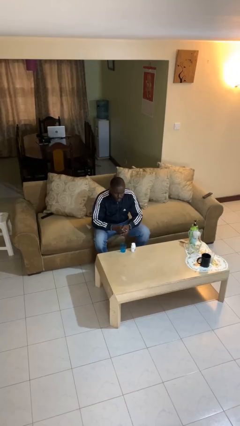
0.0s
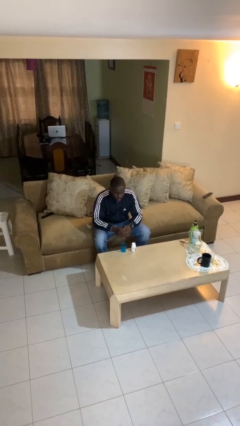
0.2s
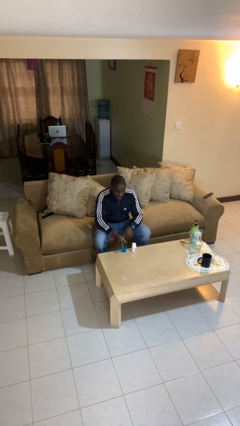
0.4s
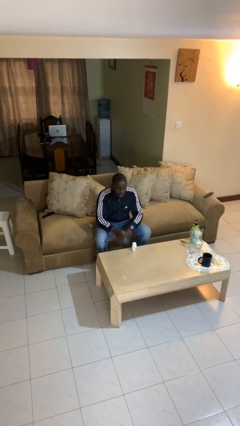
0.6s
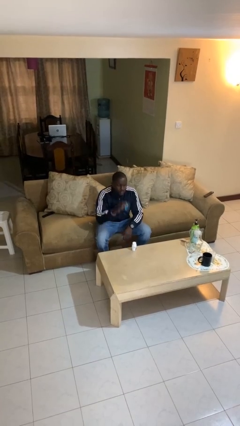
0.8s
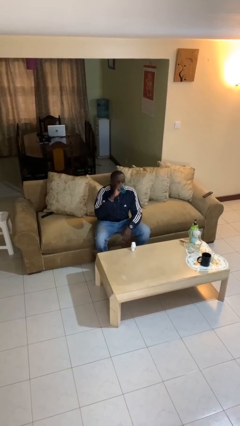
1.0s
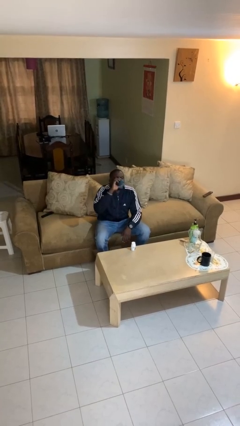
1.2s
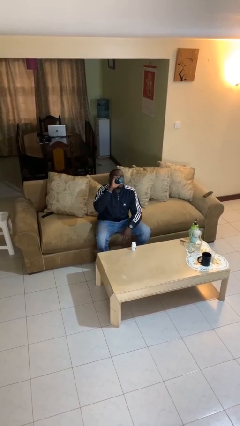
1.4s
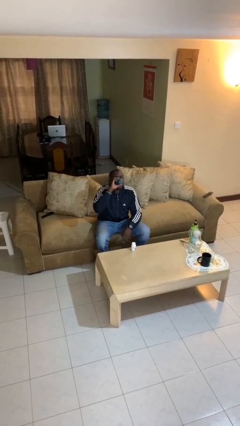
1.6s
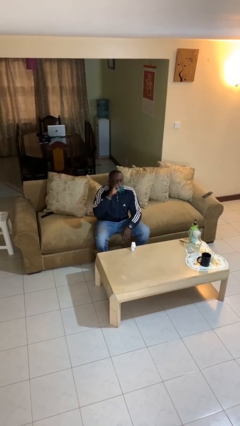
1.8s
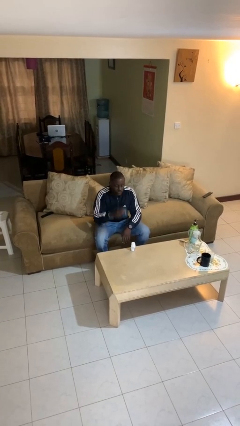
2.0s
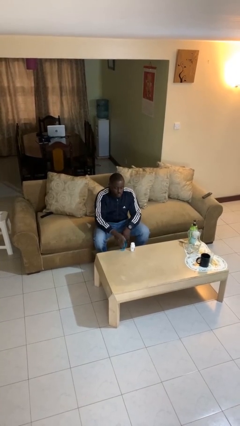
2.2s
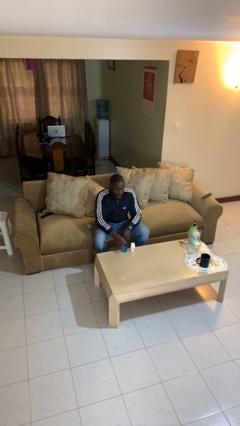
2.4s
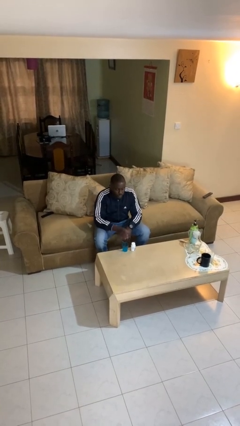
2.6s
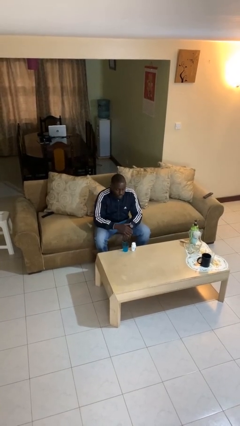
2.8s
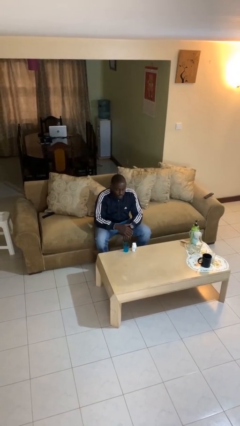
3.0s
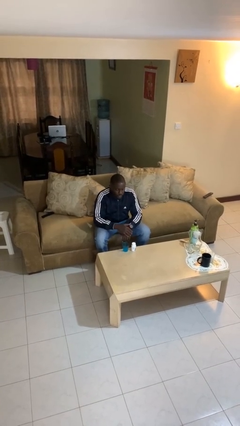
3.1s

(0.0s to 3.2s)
person drinks from cup

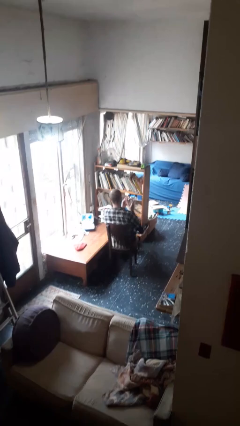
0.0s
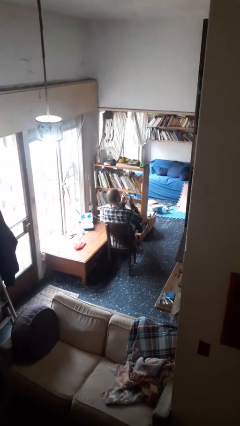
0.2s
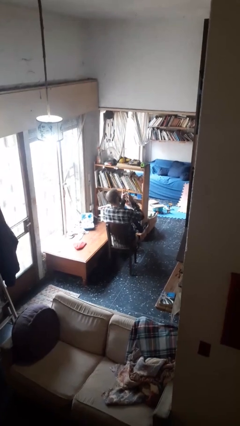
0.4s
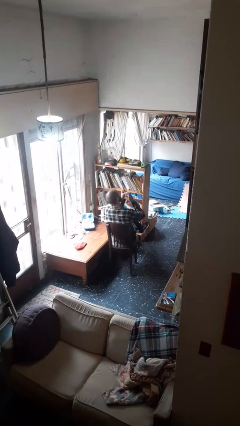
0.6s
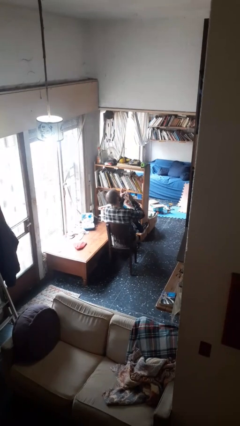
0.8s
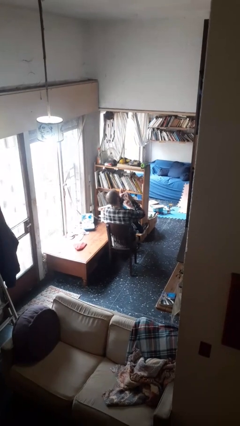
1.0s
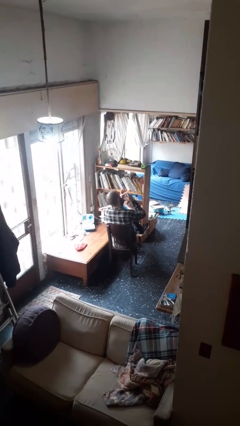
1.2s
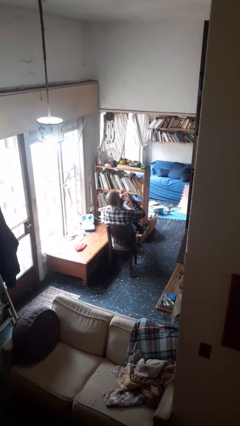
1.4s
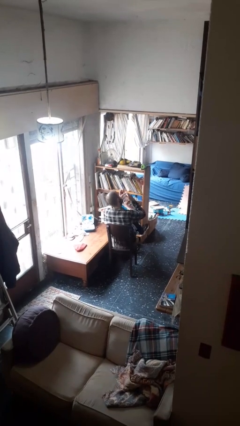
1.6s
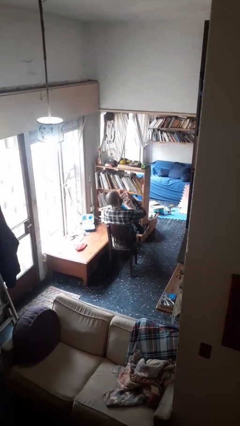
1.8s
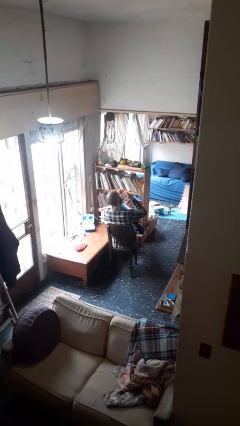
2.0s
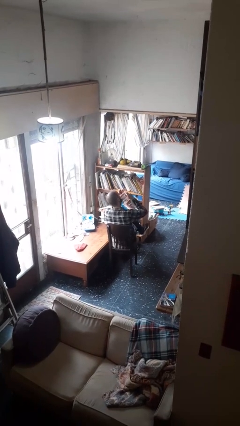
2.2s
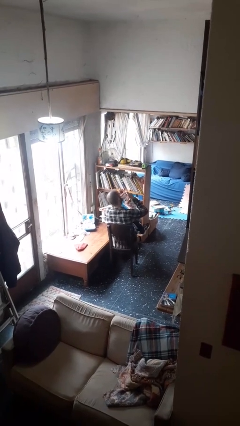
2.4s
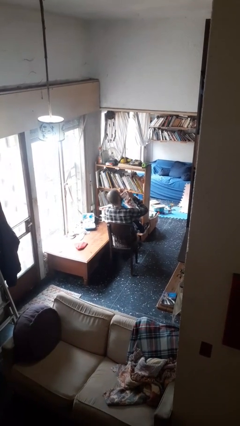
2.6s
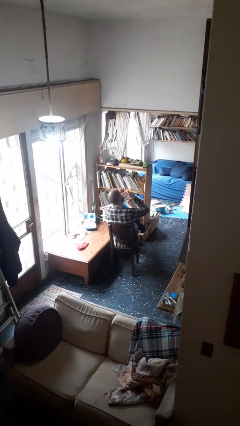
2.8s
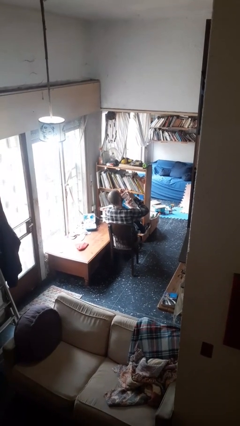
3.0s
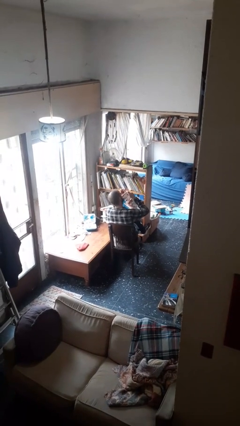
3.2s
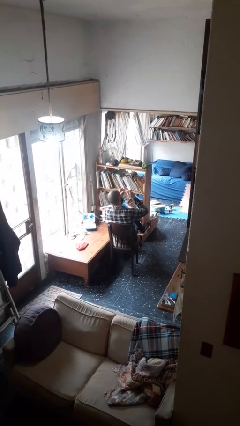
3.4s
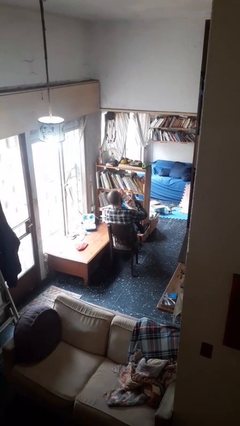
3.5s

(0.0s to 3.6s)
person clips fingernails

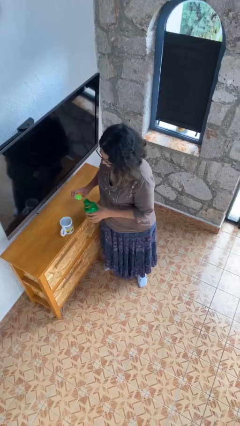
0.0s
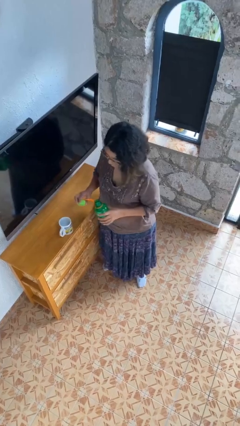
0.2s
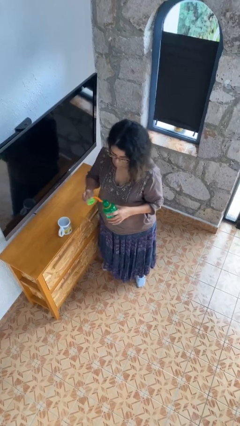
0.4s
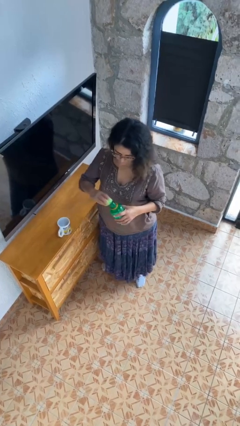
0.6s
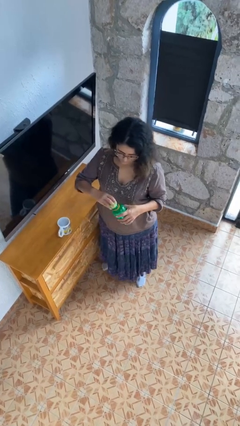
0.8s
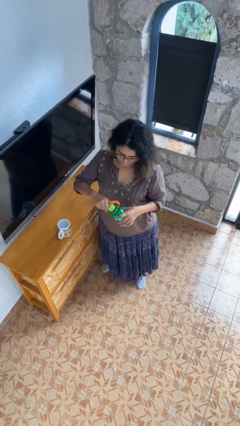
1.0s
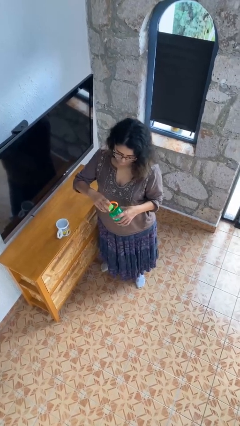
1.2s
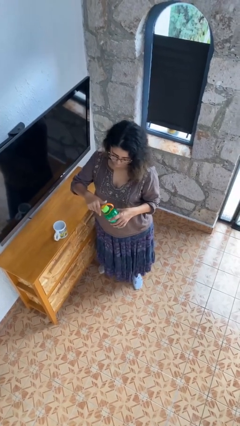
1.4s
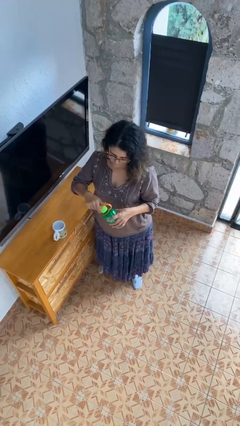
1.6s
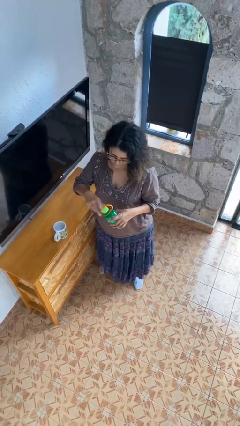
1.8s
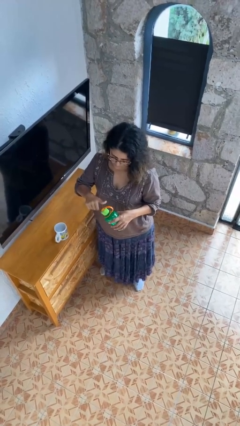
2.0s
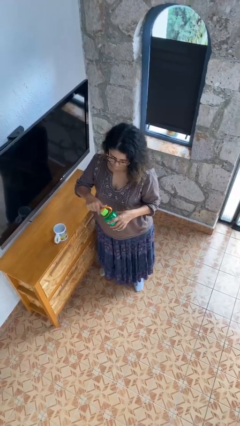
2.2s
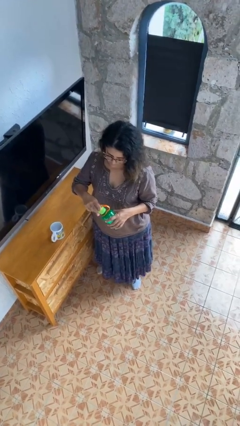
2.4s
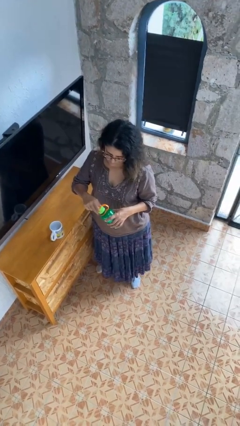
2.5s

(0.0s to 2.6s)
person screws lid to bottle

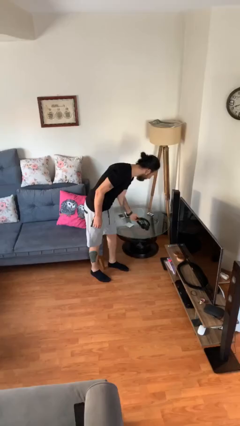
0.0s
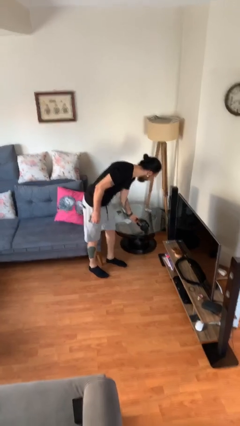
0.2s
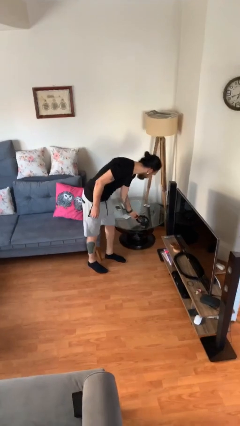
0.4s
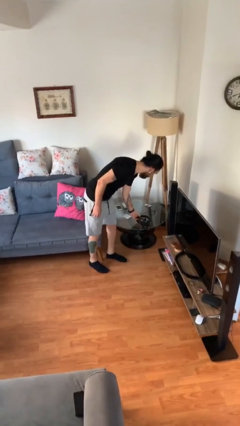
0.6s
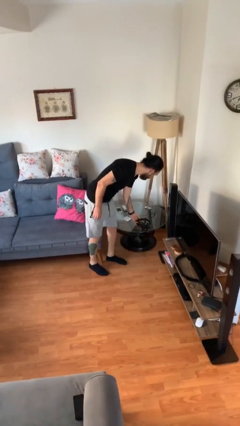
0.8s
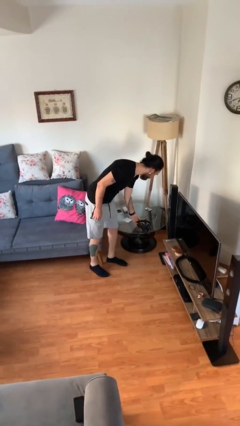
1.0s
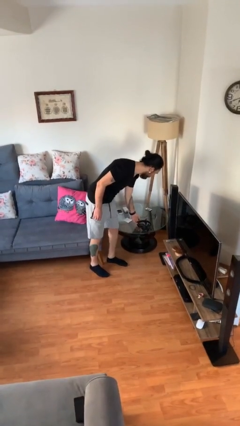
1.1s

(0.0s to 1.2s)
person puts down object on table

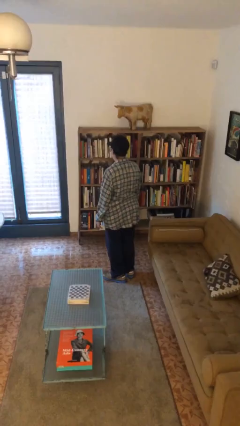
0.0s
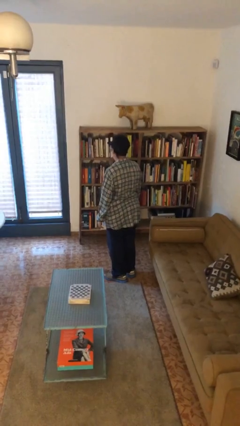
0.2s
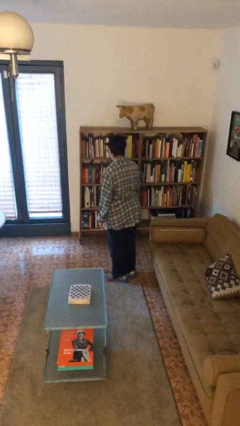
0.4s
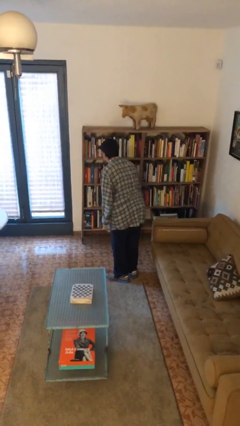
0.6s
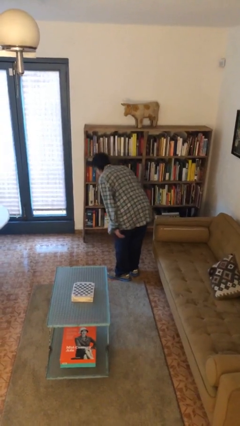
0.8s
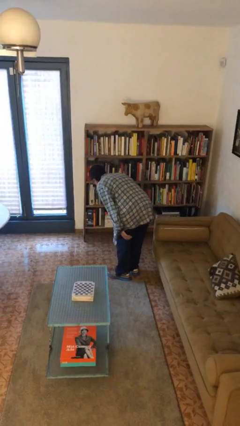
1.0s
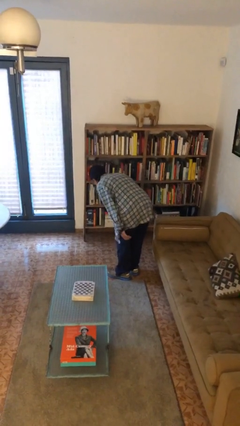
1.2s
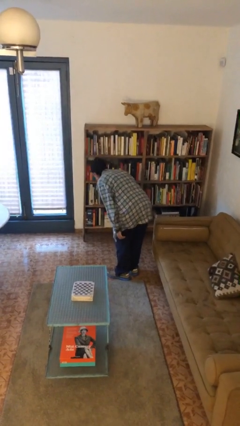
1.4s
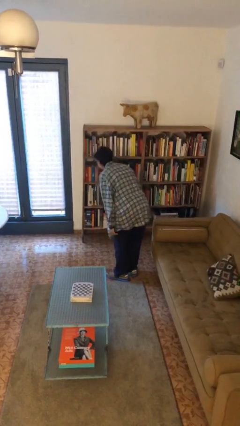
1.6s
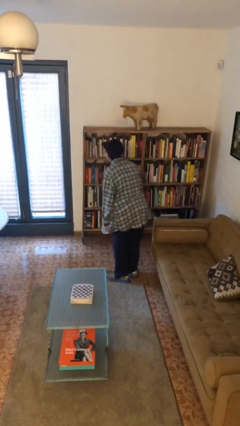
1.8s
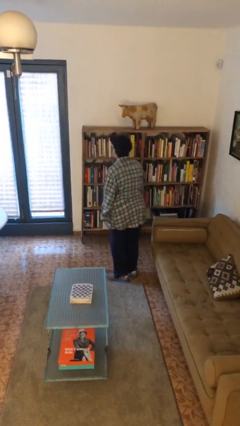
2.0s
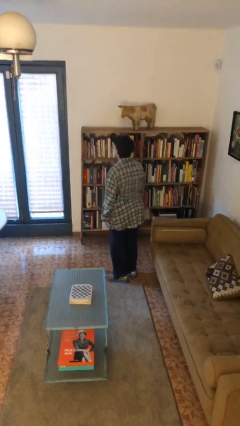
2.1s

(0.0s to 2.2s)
person bows

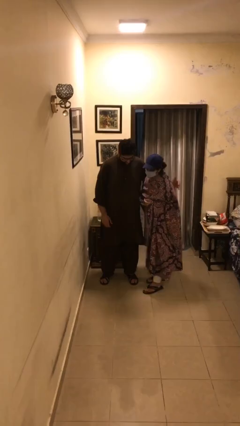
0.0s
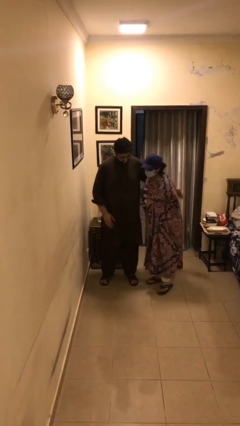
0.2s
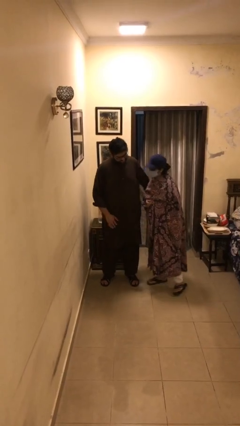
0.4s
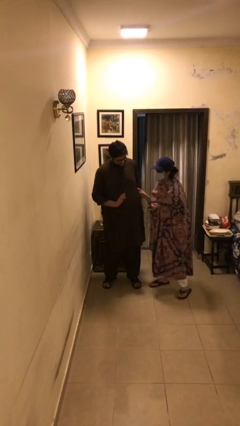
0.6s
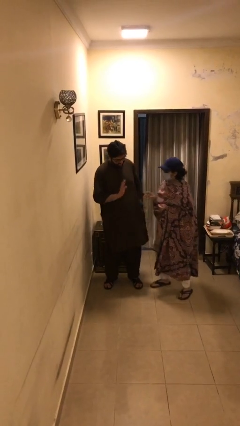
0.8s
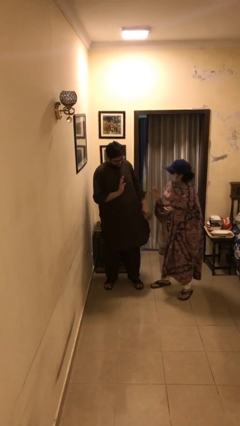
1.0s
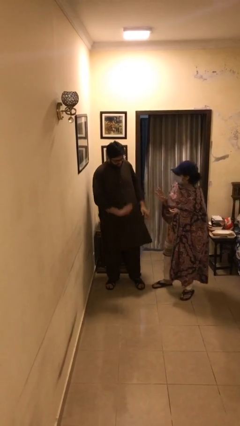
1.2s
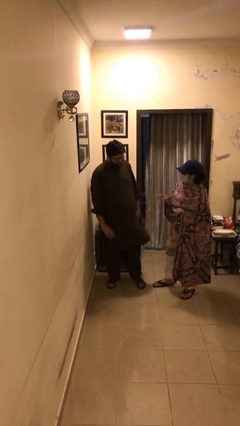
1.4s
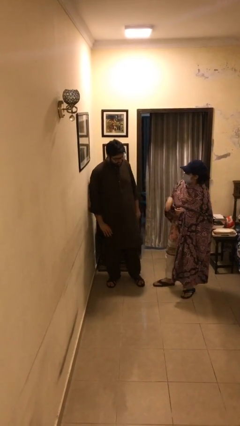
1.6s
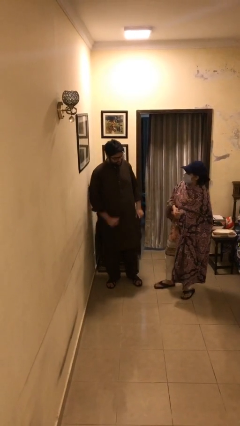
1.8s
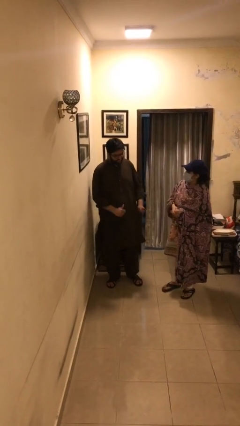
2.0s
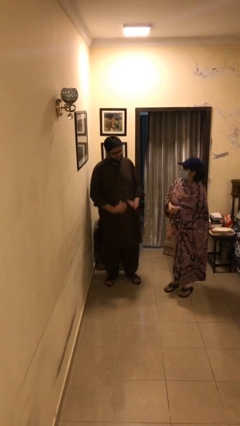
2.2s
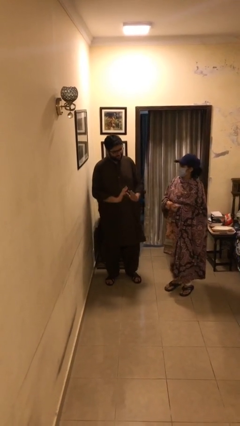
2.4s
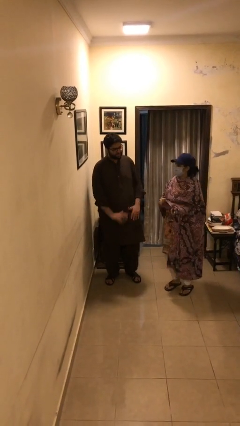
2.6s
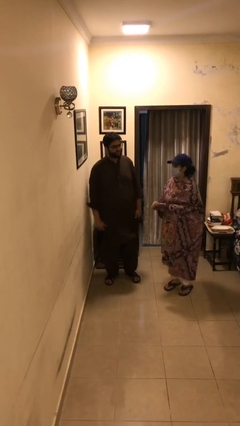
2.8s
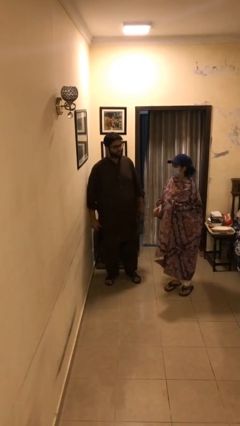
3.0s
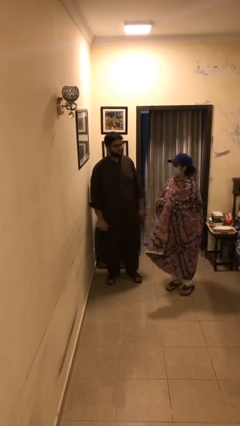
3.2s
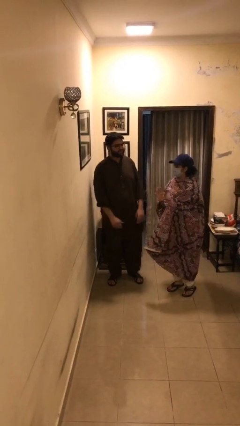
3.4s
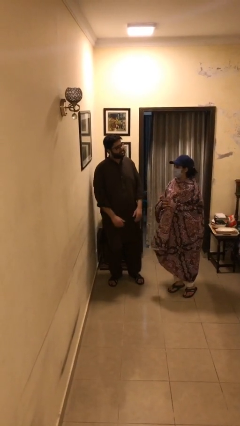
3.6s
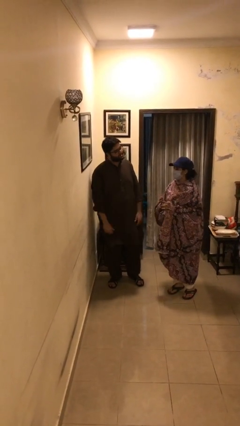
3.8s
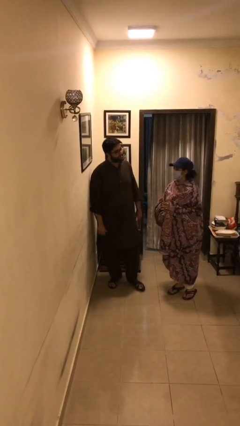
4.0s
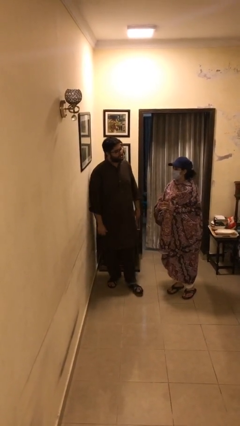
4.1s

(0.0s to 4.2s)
person talks to person

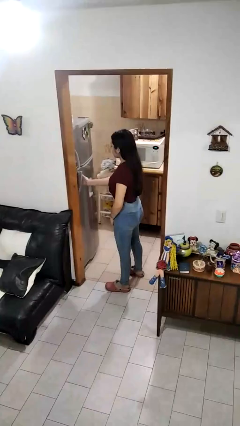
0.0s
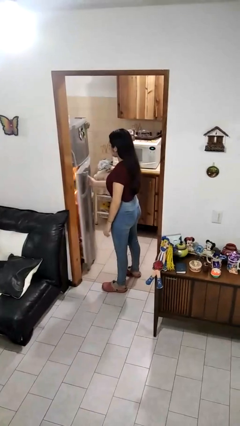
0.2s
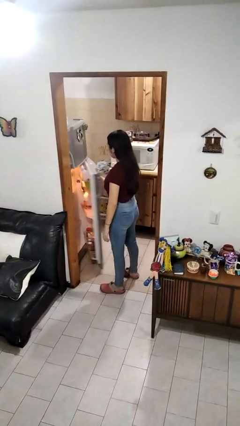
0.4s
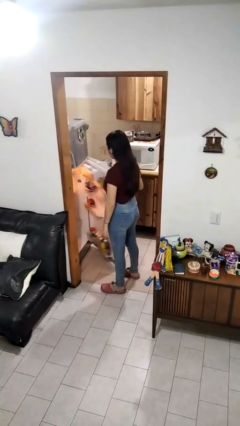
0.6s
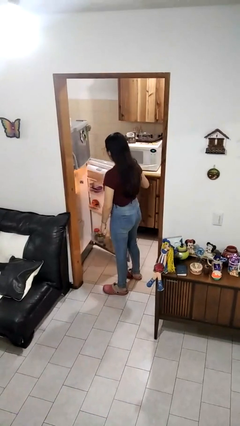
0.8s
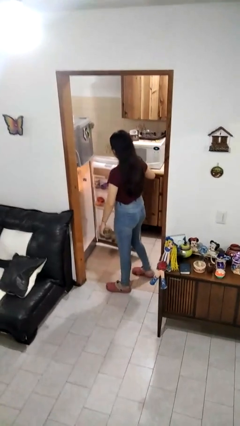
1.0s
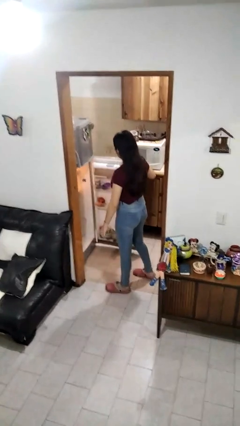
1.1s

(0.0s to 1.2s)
person opens refrigerator
